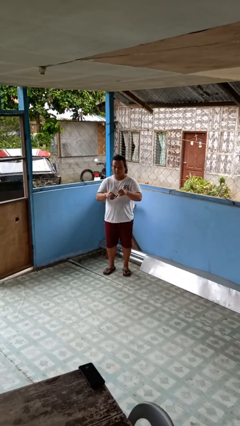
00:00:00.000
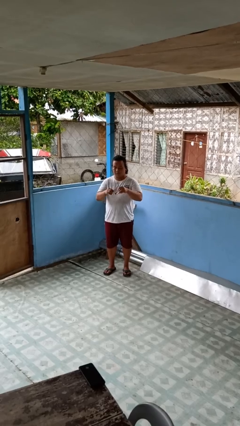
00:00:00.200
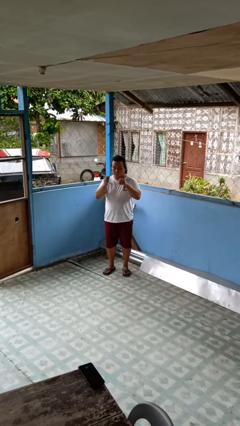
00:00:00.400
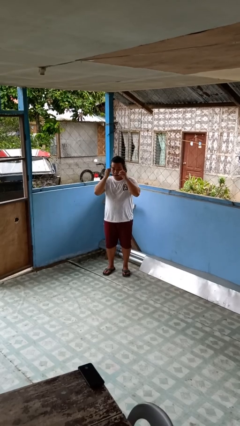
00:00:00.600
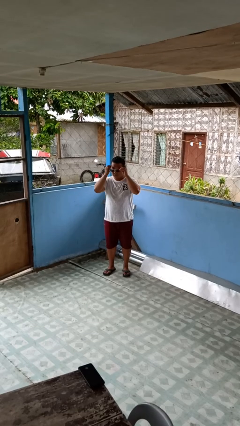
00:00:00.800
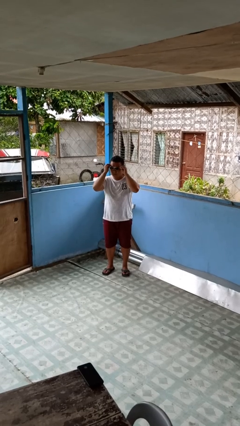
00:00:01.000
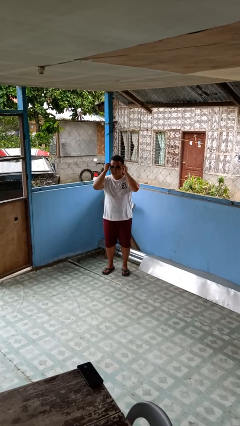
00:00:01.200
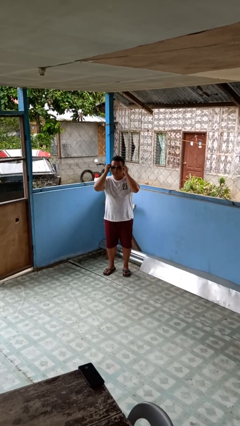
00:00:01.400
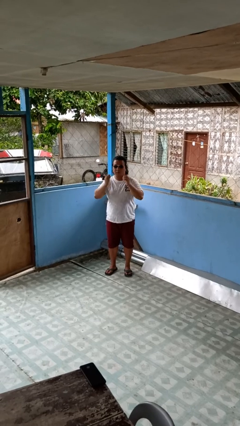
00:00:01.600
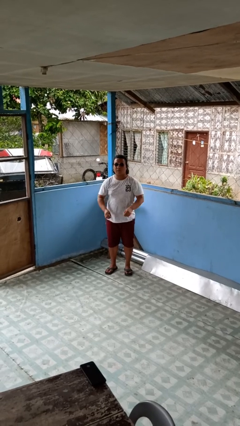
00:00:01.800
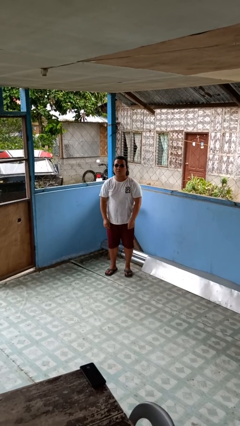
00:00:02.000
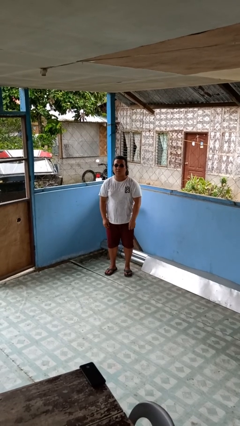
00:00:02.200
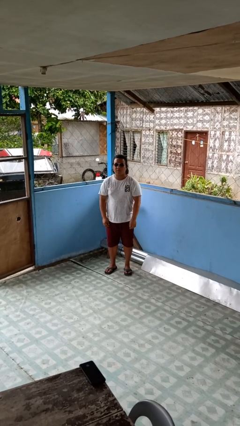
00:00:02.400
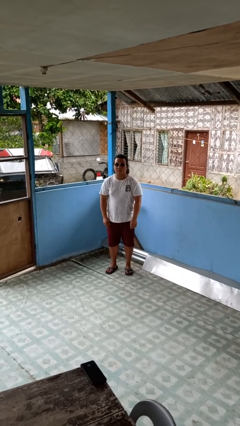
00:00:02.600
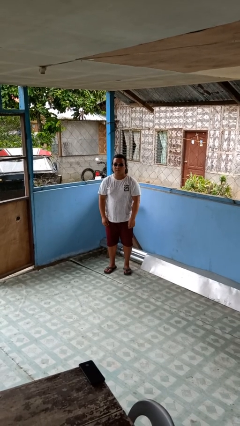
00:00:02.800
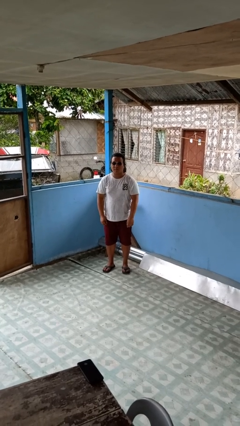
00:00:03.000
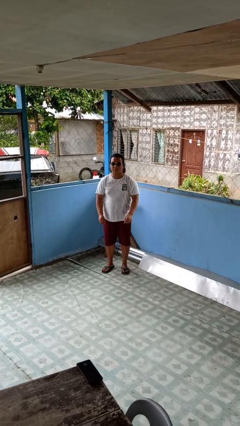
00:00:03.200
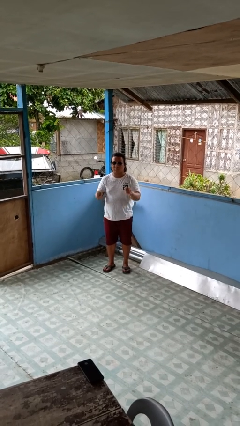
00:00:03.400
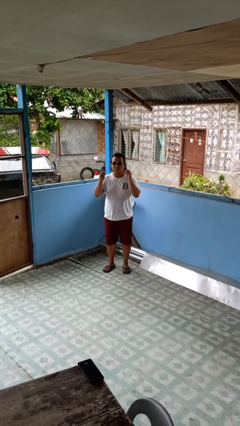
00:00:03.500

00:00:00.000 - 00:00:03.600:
person puts on sunglasses

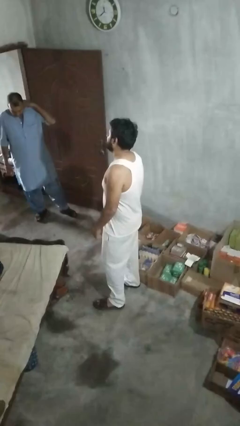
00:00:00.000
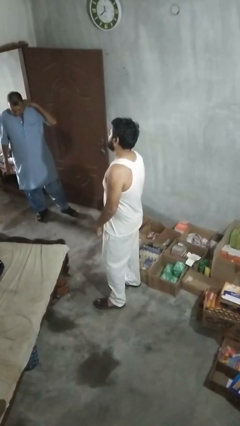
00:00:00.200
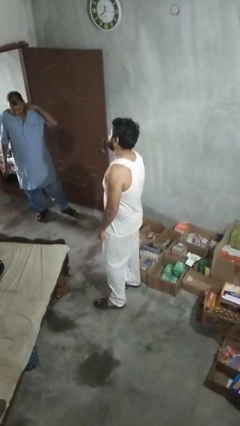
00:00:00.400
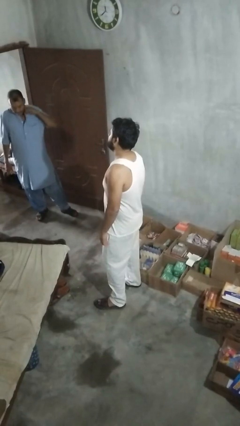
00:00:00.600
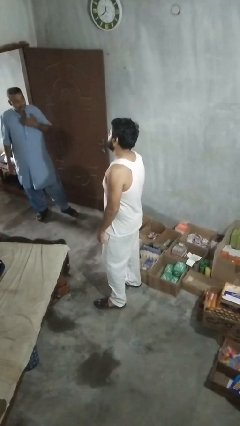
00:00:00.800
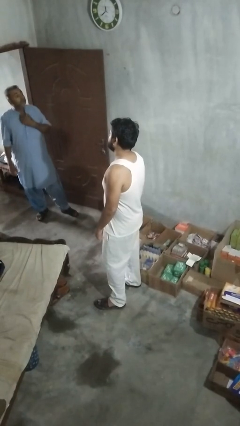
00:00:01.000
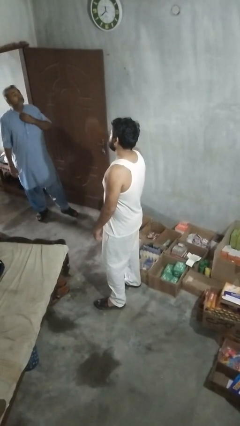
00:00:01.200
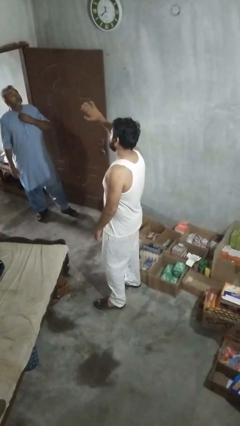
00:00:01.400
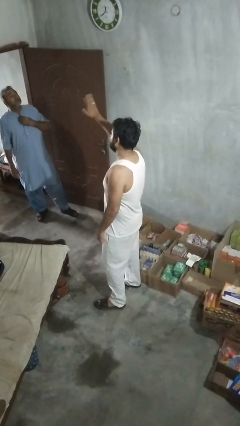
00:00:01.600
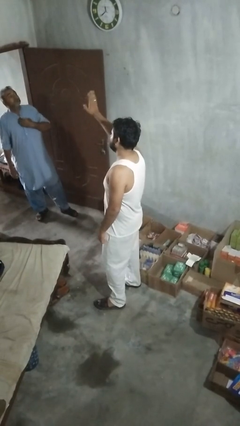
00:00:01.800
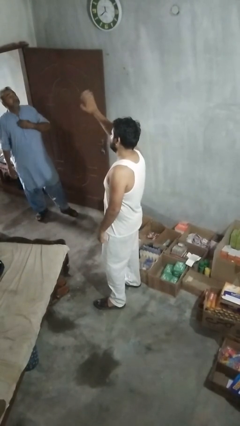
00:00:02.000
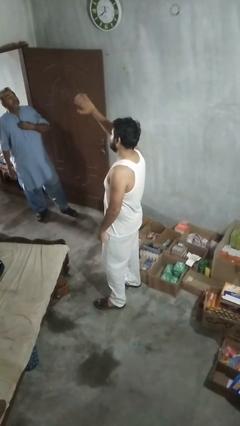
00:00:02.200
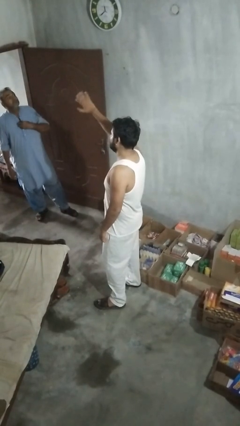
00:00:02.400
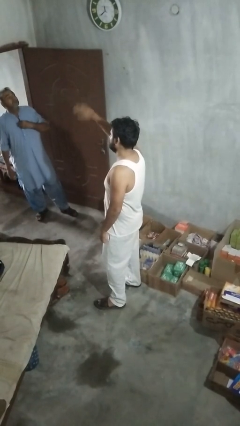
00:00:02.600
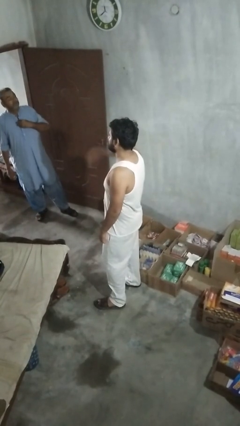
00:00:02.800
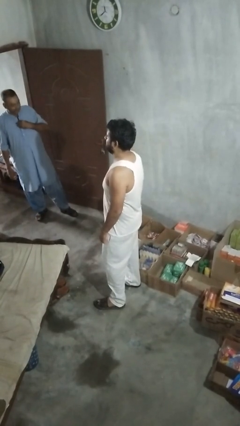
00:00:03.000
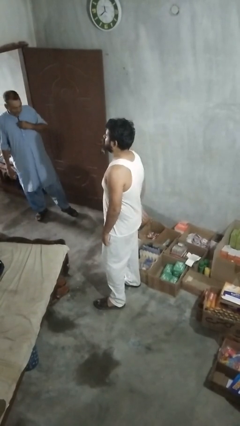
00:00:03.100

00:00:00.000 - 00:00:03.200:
person waves at person

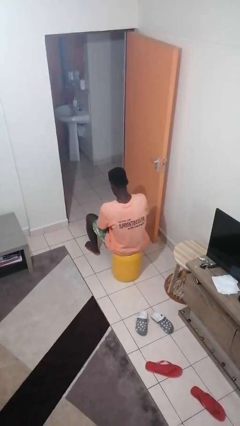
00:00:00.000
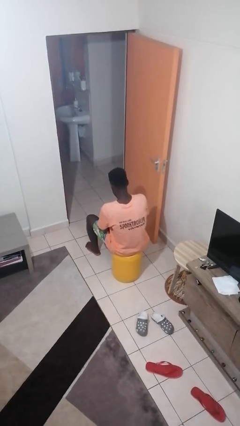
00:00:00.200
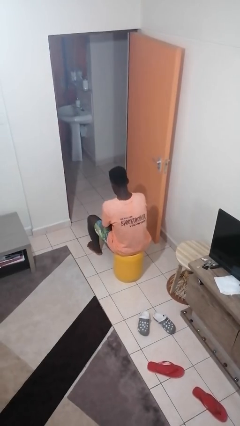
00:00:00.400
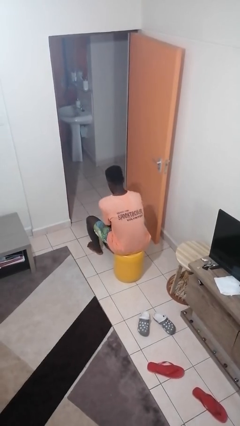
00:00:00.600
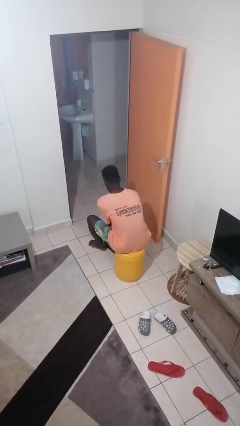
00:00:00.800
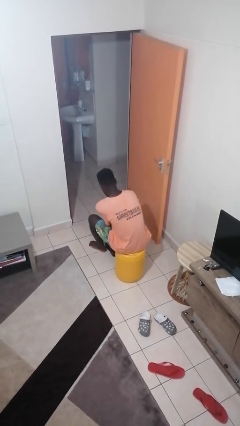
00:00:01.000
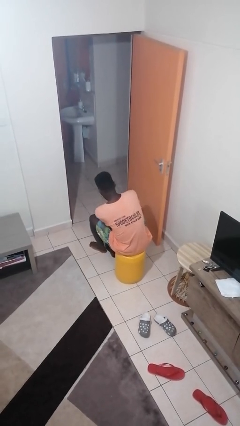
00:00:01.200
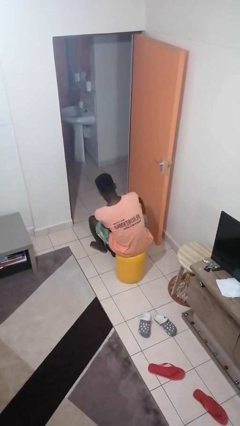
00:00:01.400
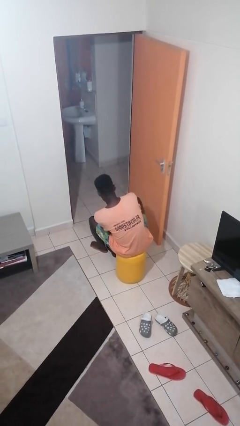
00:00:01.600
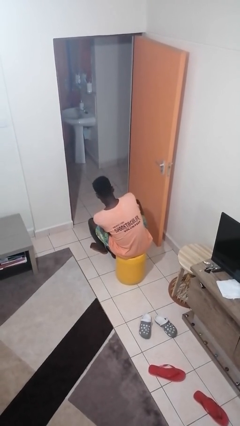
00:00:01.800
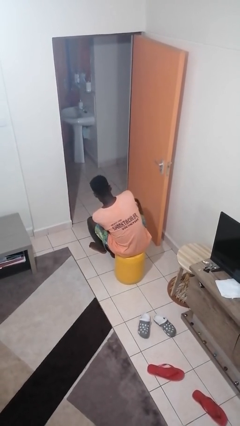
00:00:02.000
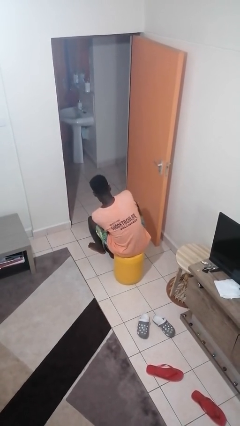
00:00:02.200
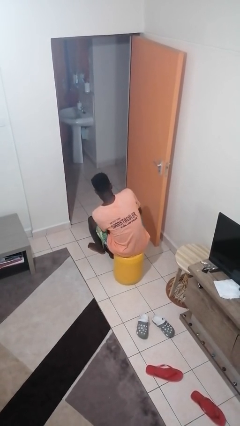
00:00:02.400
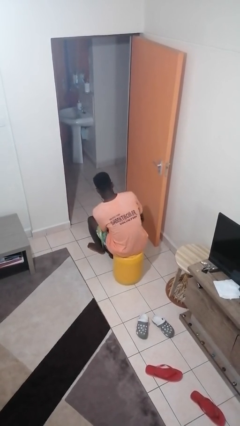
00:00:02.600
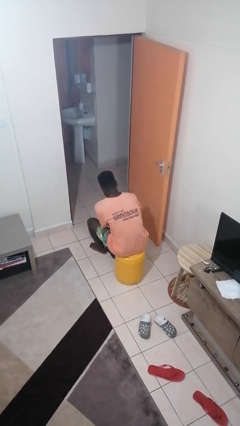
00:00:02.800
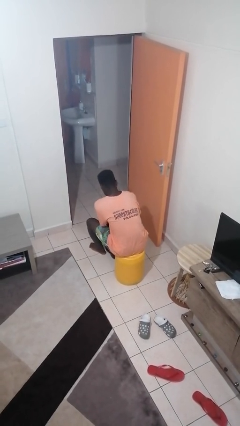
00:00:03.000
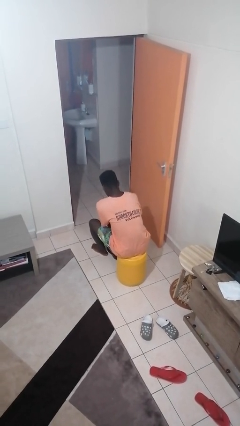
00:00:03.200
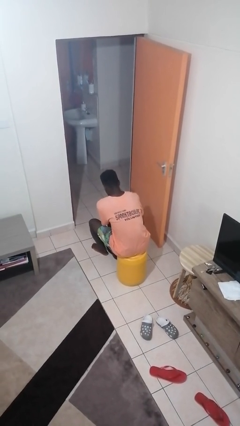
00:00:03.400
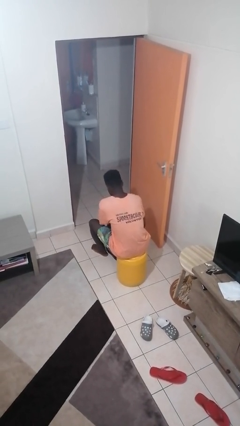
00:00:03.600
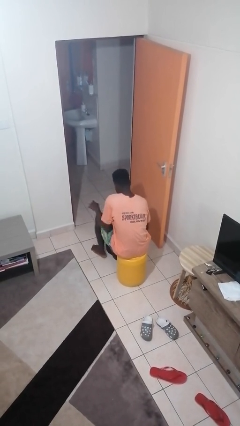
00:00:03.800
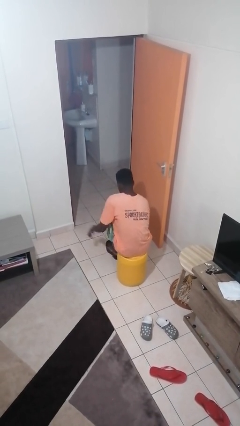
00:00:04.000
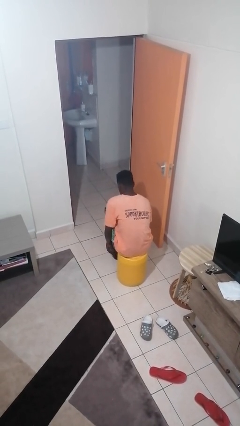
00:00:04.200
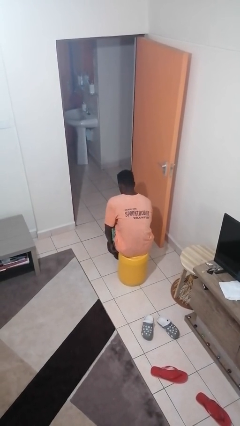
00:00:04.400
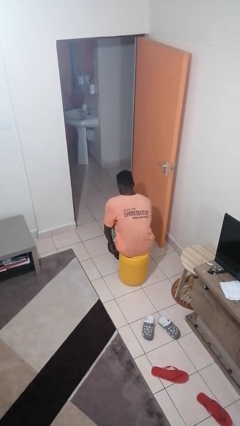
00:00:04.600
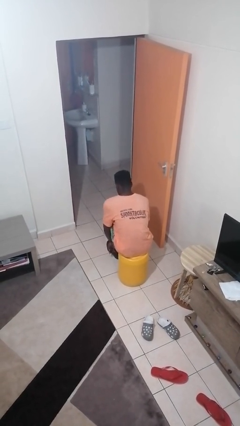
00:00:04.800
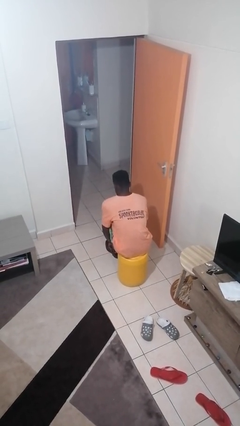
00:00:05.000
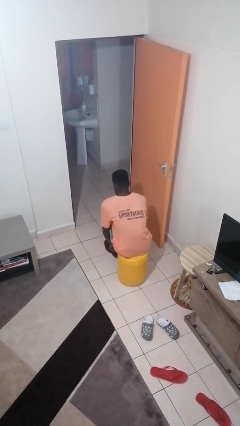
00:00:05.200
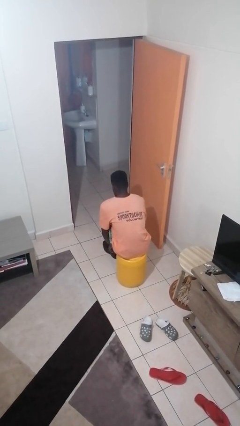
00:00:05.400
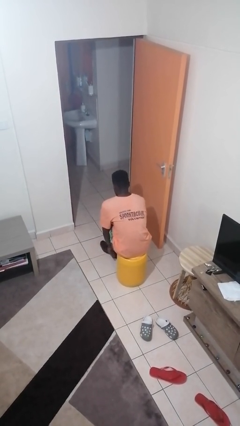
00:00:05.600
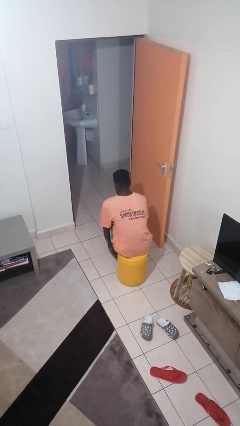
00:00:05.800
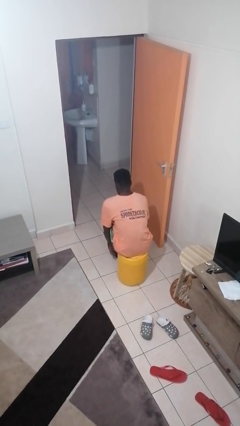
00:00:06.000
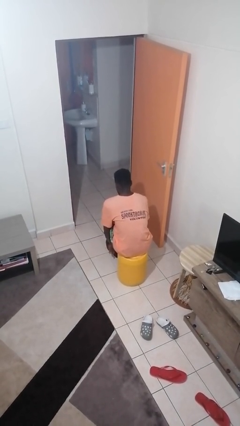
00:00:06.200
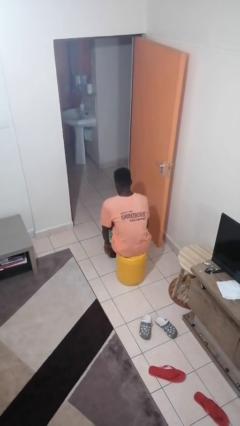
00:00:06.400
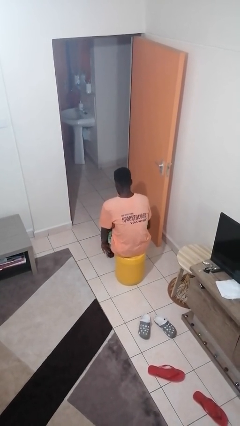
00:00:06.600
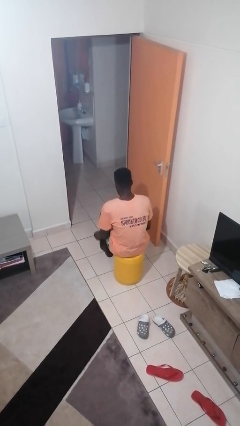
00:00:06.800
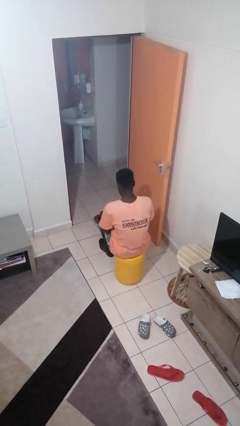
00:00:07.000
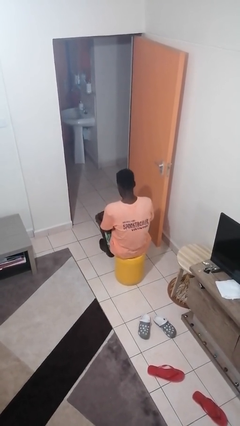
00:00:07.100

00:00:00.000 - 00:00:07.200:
person puts on shoes

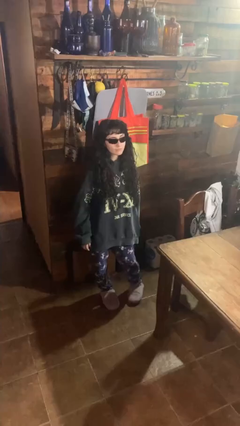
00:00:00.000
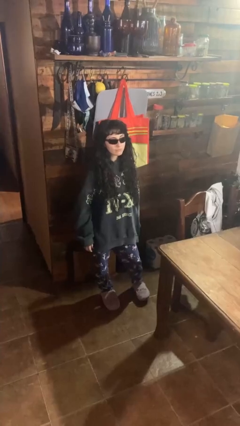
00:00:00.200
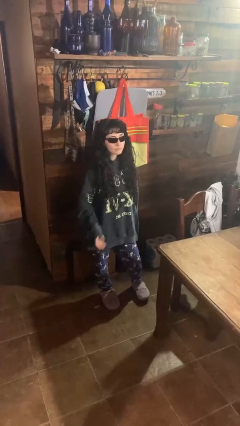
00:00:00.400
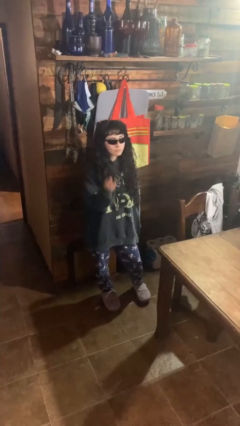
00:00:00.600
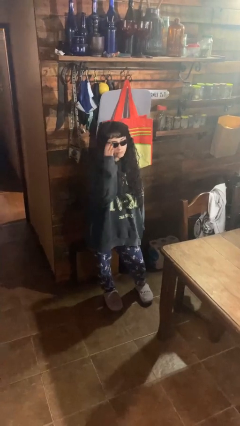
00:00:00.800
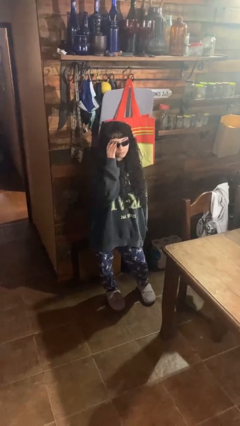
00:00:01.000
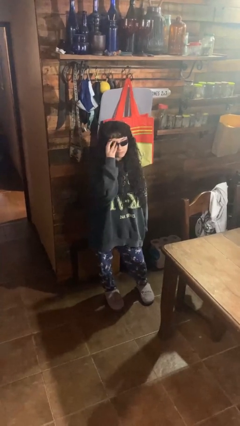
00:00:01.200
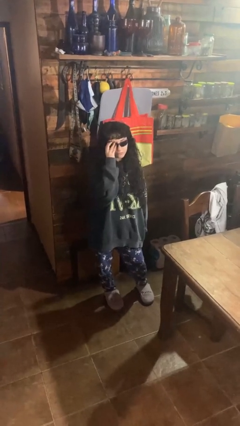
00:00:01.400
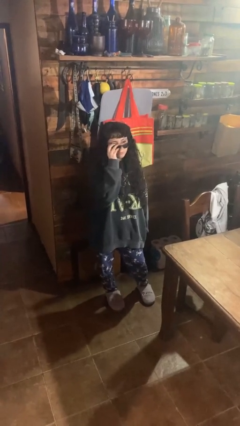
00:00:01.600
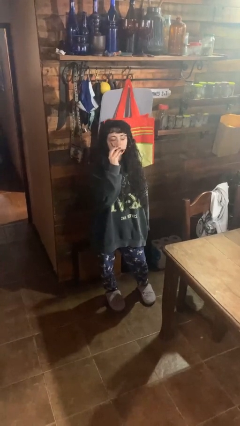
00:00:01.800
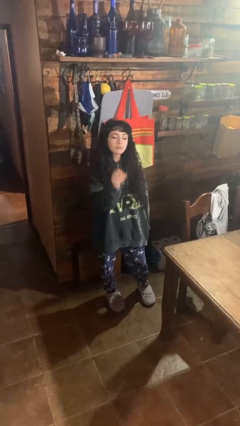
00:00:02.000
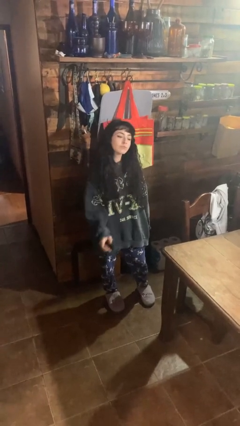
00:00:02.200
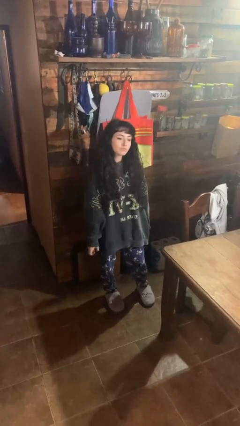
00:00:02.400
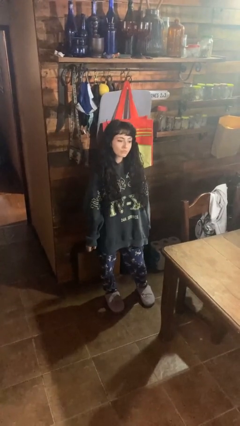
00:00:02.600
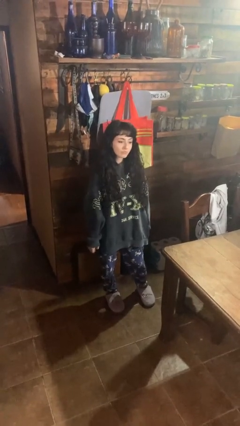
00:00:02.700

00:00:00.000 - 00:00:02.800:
person takes off sunglasses

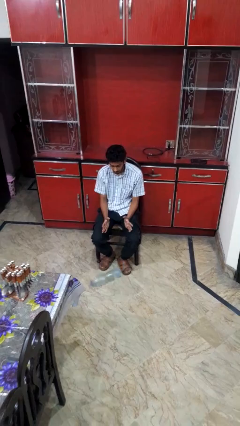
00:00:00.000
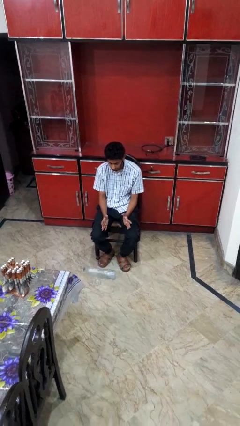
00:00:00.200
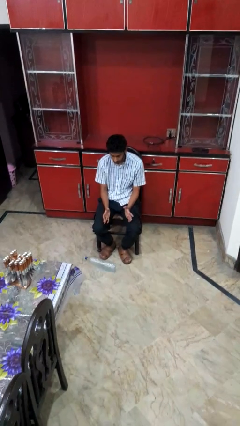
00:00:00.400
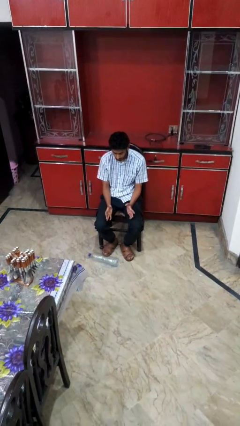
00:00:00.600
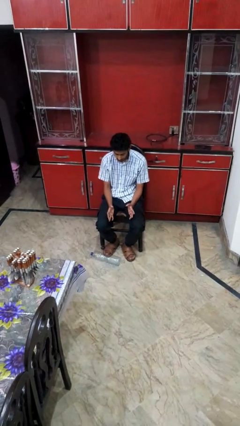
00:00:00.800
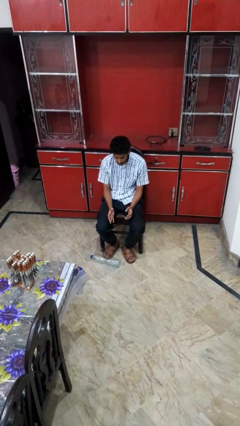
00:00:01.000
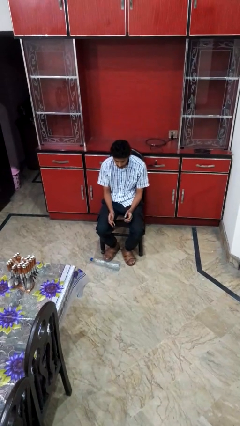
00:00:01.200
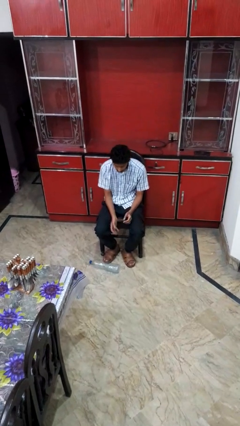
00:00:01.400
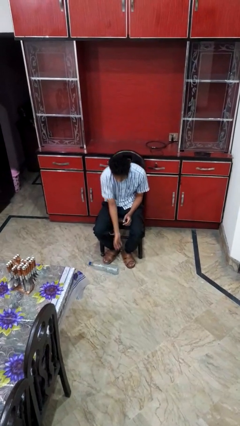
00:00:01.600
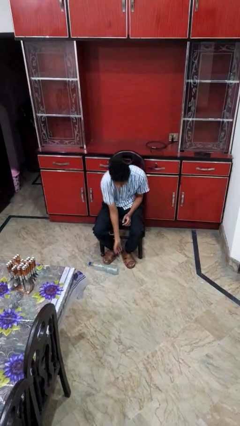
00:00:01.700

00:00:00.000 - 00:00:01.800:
person drops object
